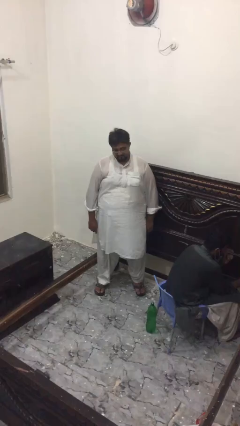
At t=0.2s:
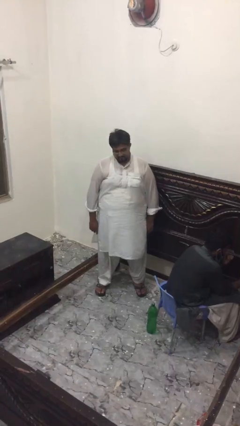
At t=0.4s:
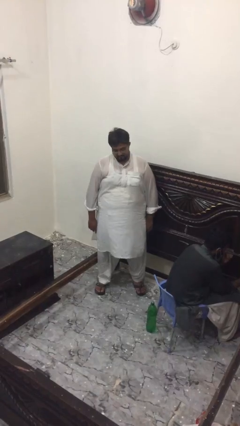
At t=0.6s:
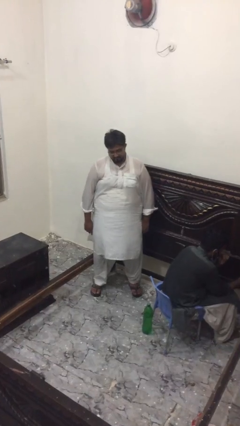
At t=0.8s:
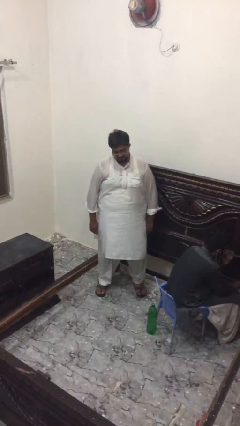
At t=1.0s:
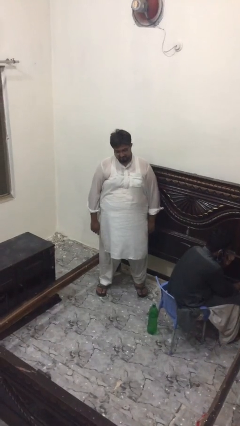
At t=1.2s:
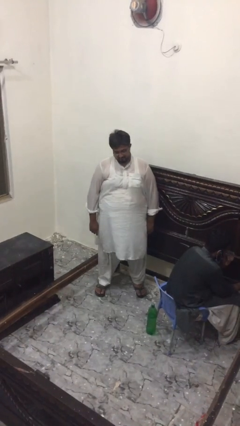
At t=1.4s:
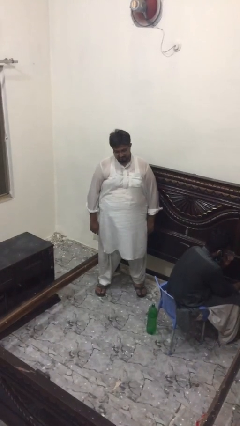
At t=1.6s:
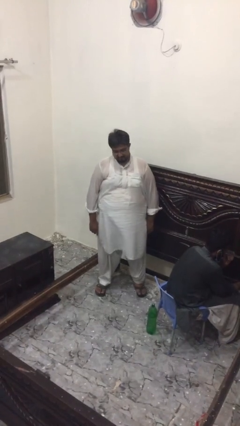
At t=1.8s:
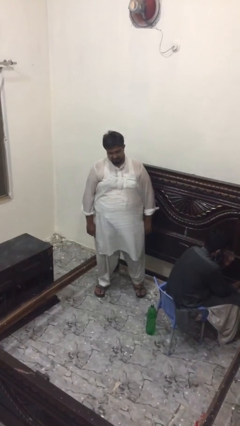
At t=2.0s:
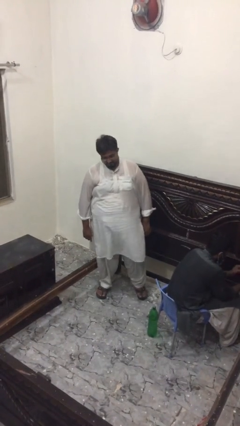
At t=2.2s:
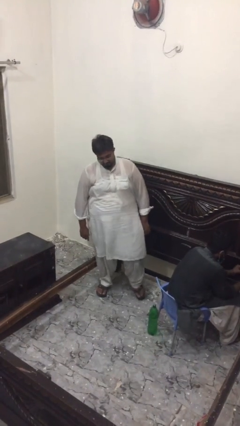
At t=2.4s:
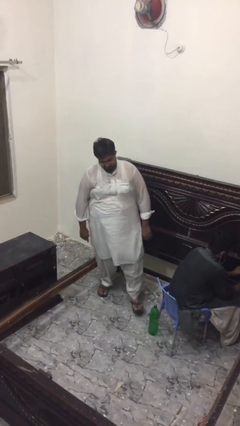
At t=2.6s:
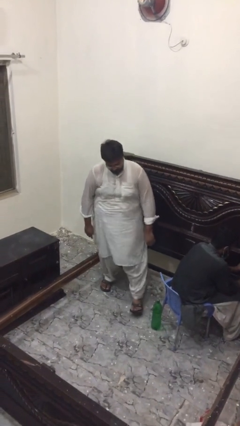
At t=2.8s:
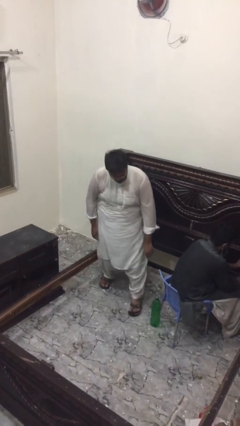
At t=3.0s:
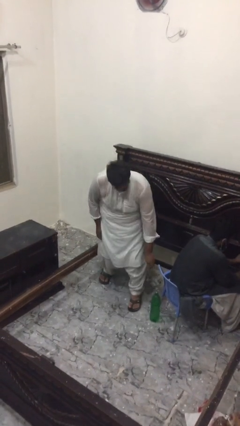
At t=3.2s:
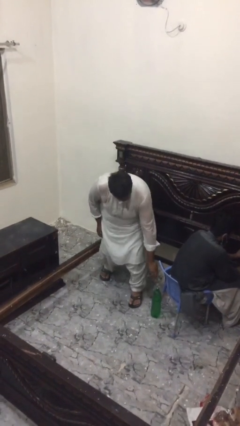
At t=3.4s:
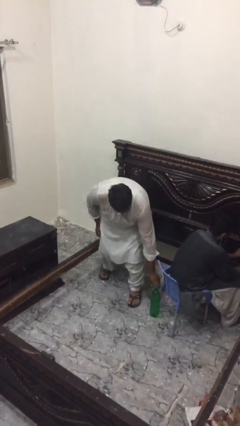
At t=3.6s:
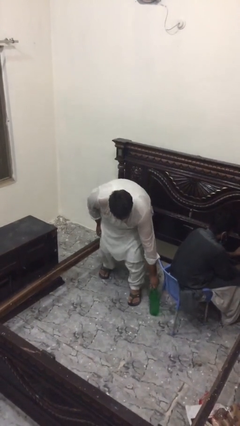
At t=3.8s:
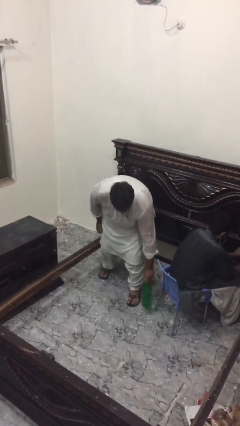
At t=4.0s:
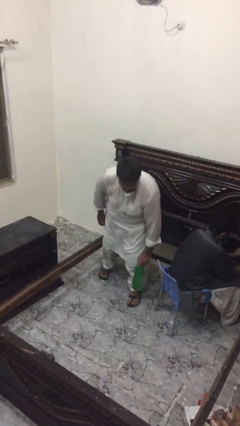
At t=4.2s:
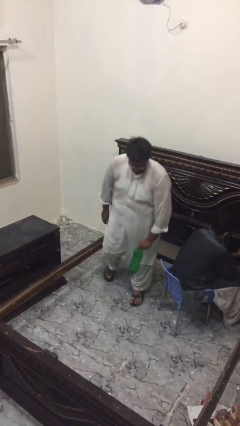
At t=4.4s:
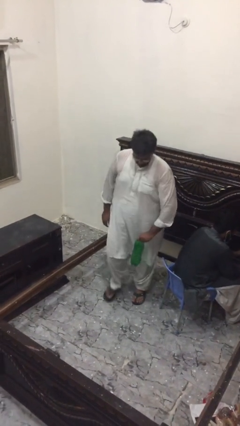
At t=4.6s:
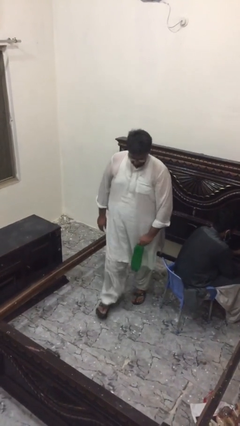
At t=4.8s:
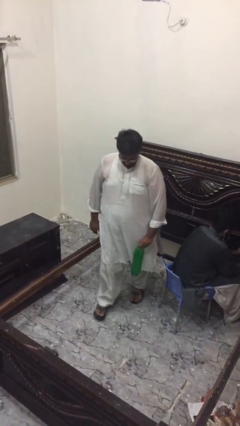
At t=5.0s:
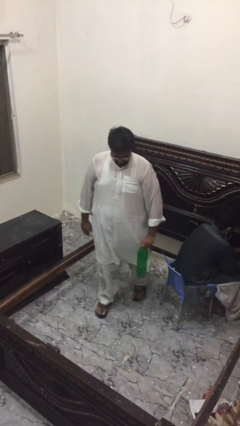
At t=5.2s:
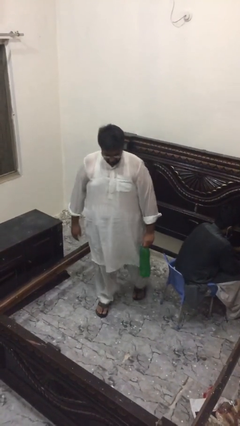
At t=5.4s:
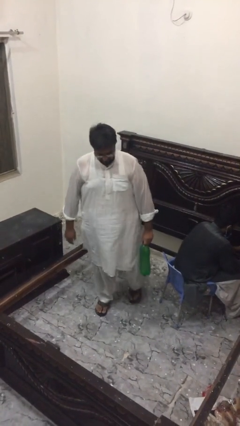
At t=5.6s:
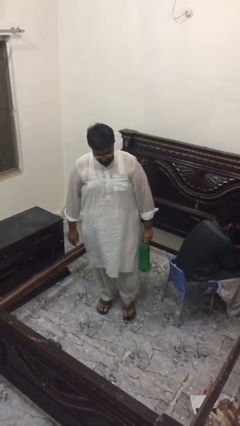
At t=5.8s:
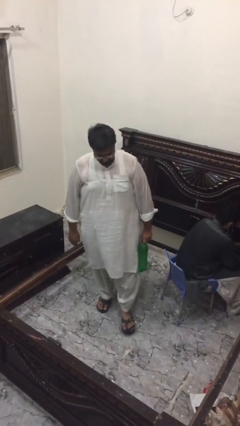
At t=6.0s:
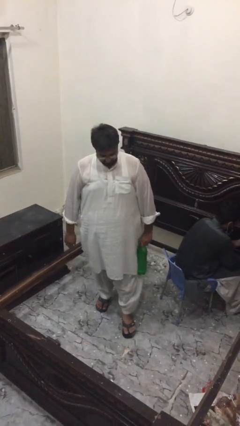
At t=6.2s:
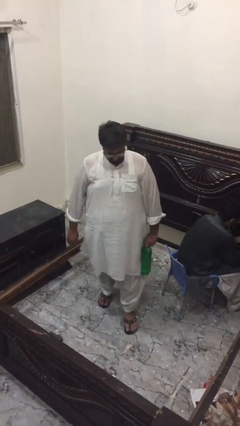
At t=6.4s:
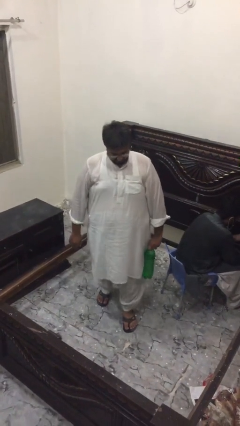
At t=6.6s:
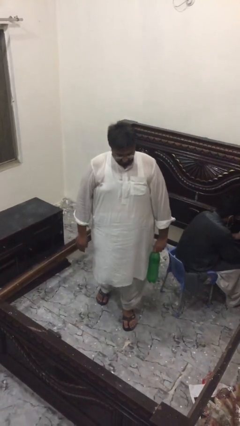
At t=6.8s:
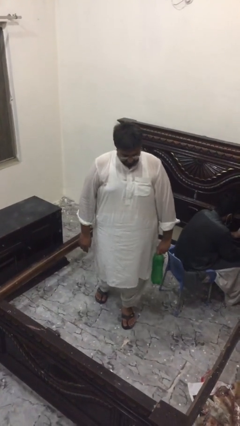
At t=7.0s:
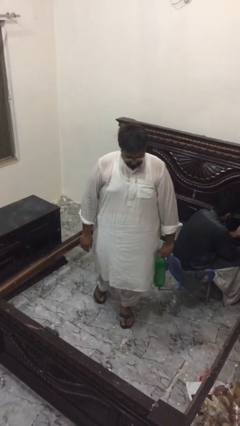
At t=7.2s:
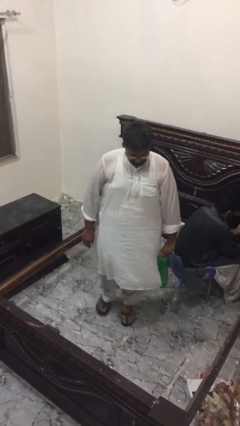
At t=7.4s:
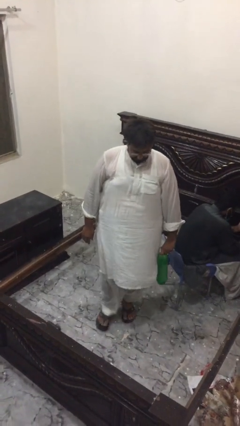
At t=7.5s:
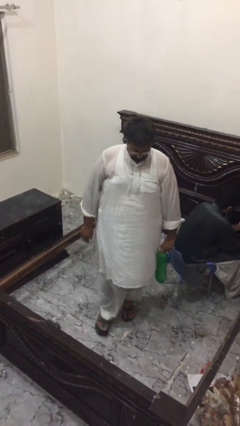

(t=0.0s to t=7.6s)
person steals object from person

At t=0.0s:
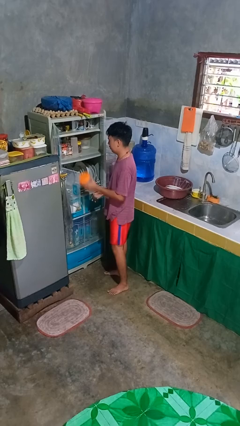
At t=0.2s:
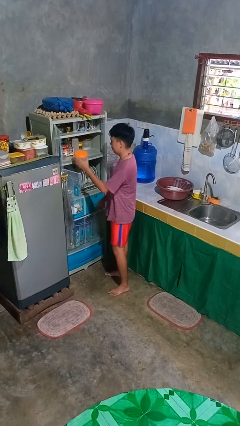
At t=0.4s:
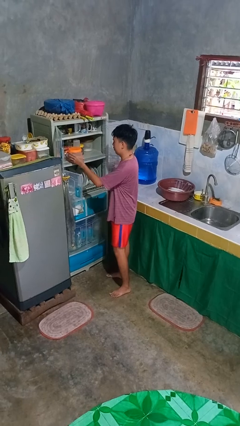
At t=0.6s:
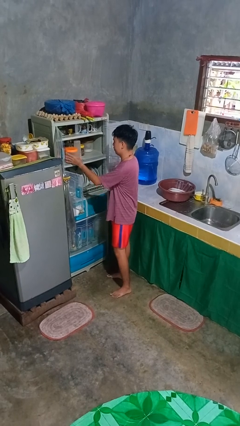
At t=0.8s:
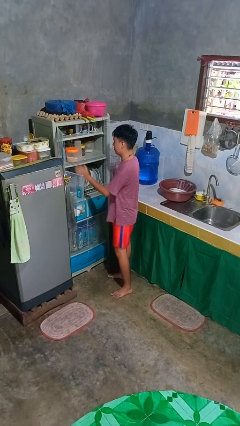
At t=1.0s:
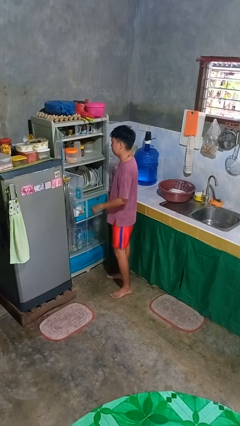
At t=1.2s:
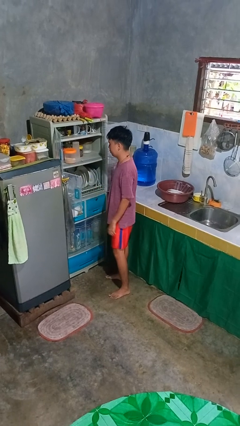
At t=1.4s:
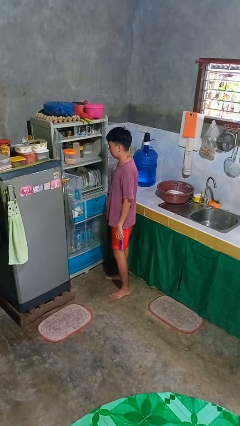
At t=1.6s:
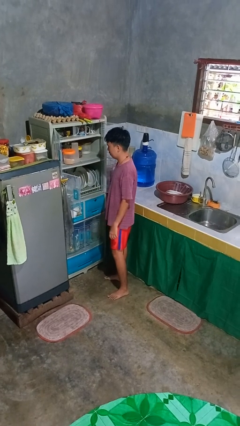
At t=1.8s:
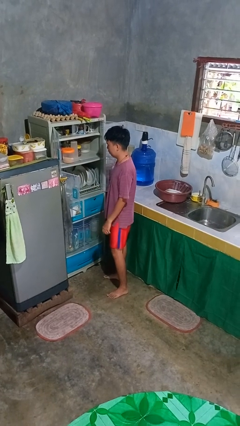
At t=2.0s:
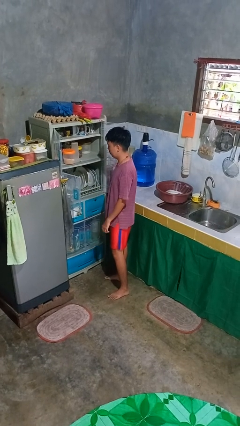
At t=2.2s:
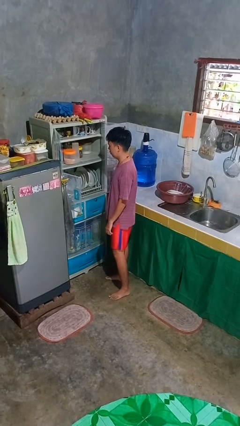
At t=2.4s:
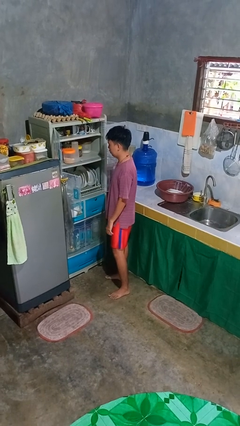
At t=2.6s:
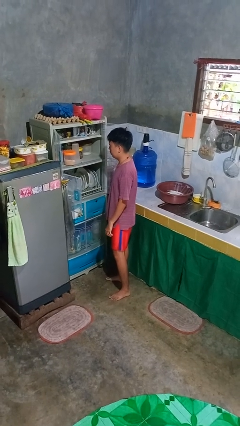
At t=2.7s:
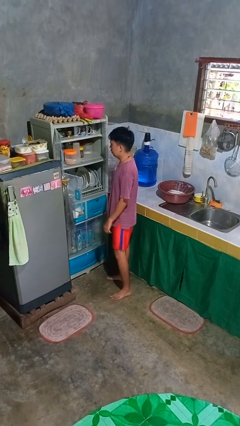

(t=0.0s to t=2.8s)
person puts object in cabinet

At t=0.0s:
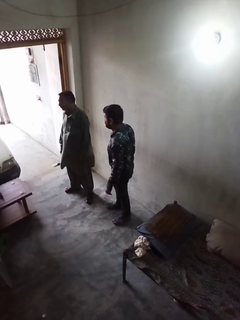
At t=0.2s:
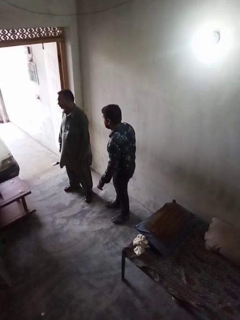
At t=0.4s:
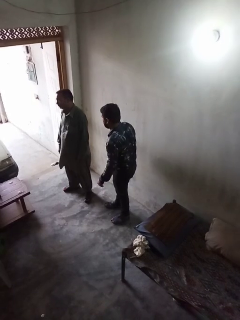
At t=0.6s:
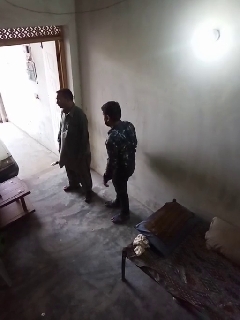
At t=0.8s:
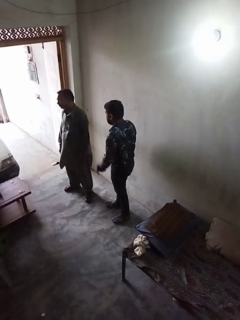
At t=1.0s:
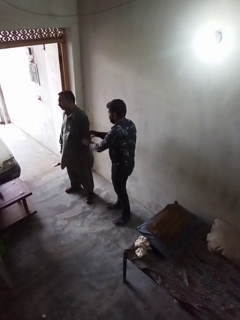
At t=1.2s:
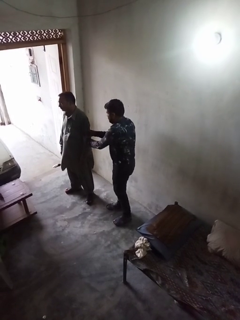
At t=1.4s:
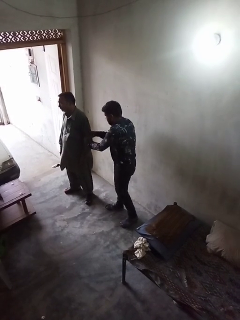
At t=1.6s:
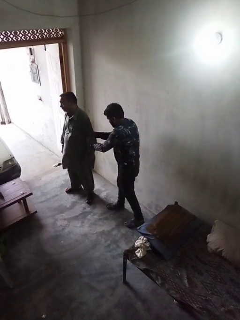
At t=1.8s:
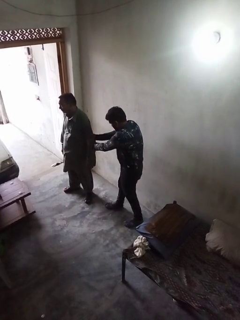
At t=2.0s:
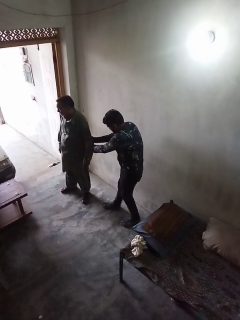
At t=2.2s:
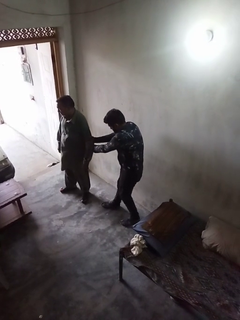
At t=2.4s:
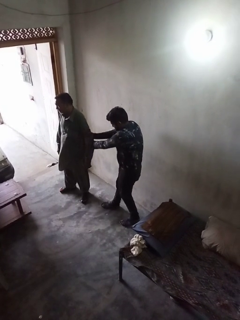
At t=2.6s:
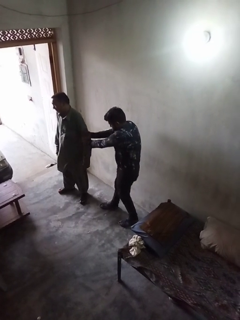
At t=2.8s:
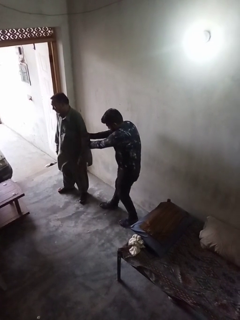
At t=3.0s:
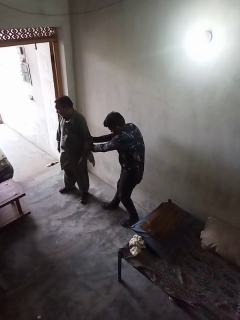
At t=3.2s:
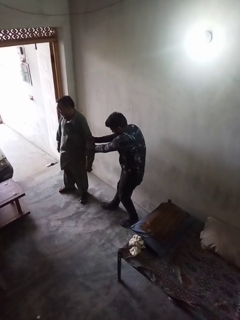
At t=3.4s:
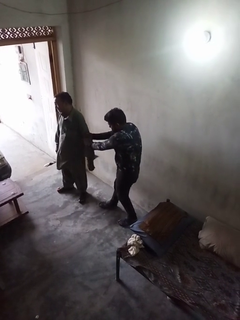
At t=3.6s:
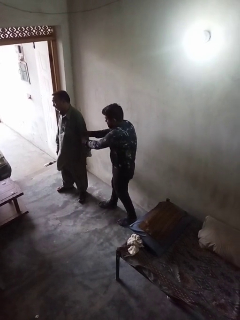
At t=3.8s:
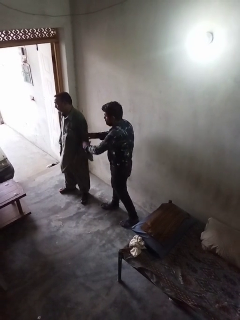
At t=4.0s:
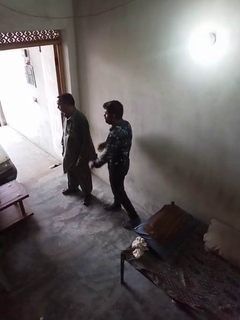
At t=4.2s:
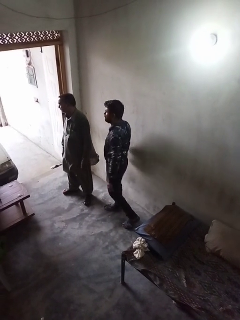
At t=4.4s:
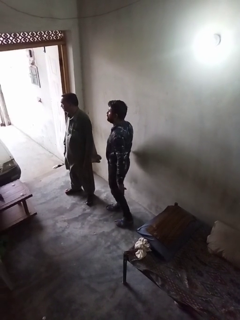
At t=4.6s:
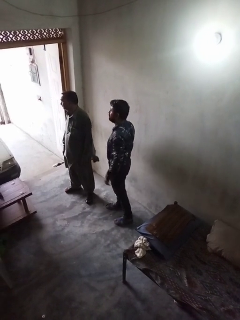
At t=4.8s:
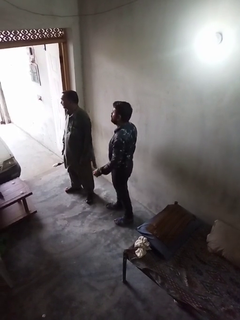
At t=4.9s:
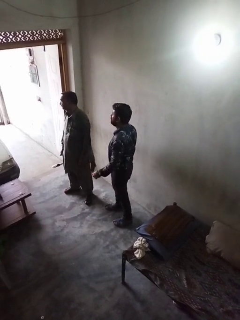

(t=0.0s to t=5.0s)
person grabs person by forearm

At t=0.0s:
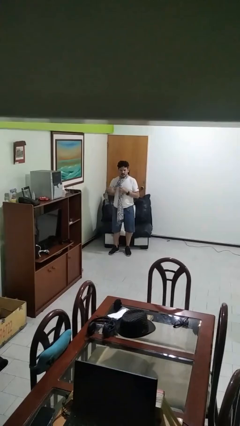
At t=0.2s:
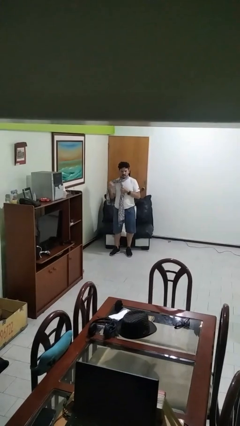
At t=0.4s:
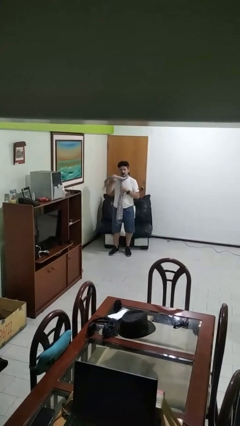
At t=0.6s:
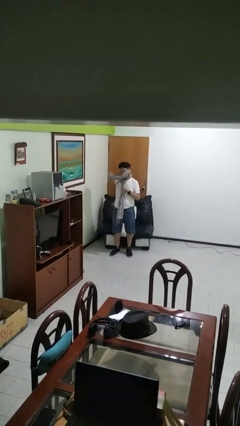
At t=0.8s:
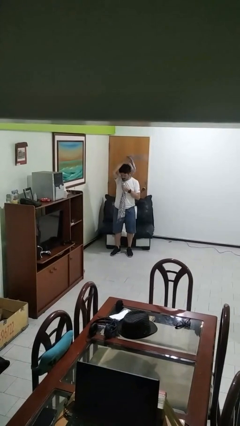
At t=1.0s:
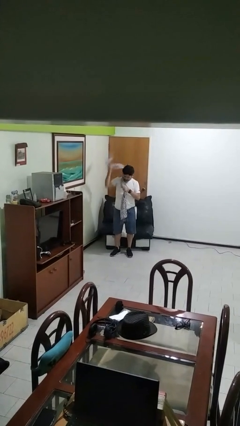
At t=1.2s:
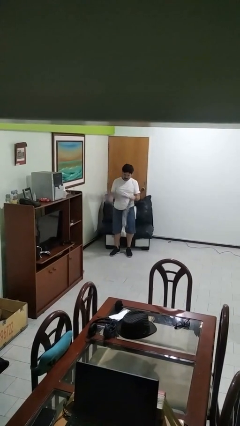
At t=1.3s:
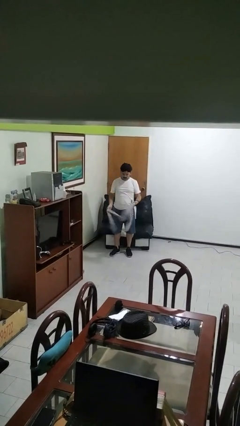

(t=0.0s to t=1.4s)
person takes off scarf

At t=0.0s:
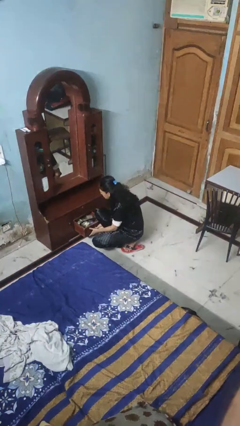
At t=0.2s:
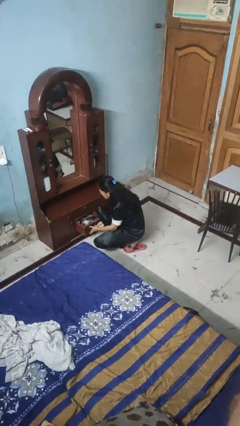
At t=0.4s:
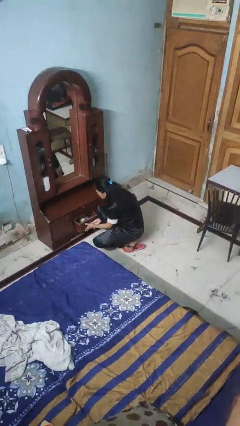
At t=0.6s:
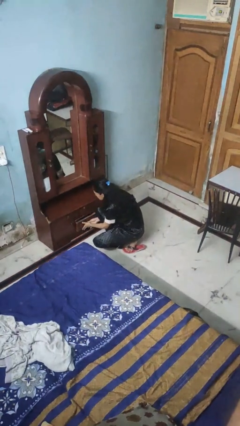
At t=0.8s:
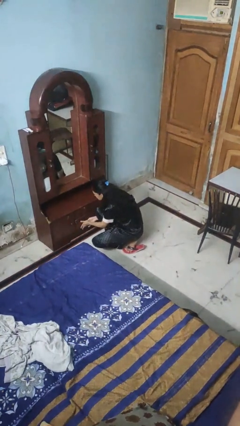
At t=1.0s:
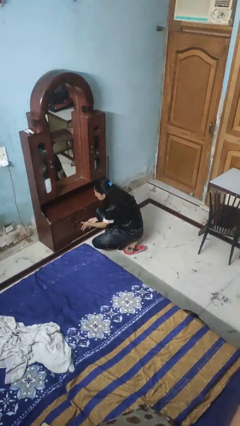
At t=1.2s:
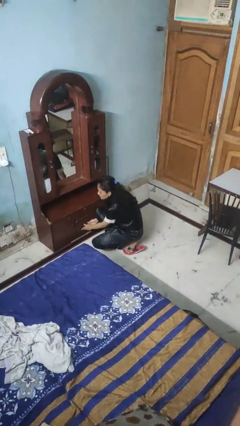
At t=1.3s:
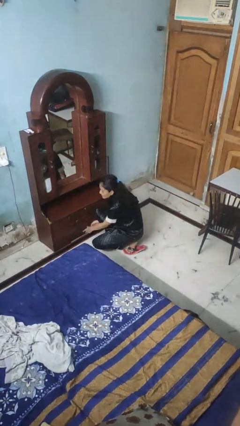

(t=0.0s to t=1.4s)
person closes dresser drawer

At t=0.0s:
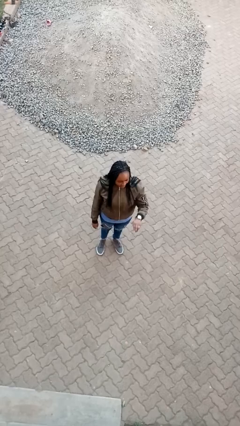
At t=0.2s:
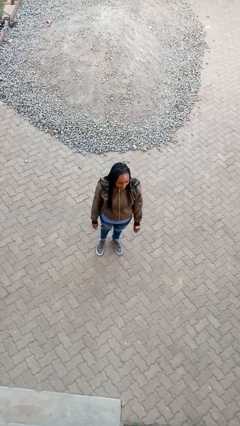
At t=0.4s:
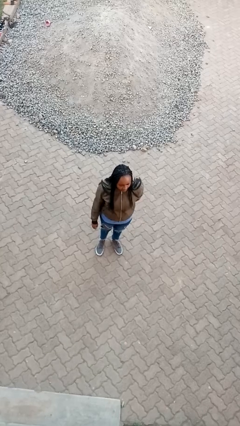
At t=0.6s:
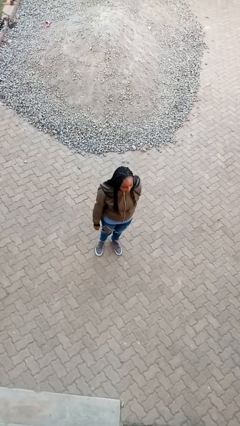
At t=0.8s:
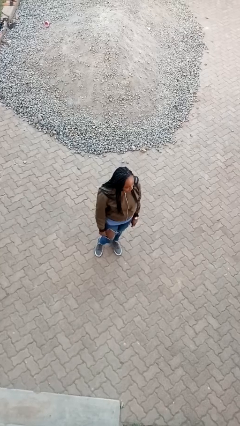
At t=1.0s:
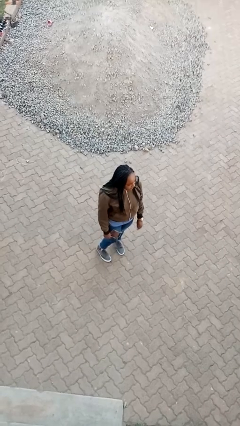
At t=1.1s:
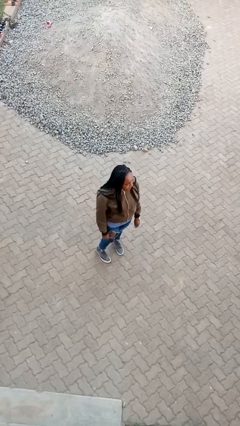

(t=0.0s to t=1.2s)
person gestures stop
